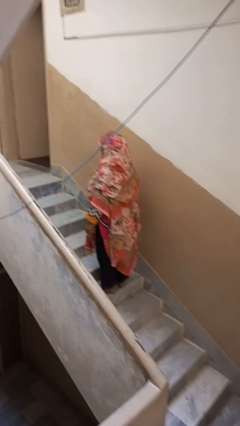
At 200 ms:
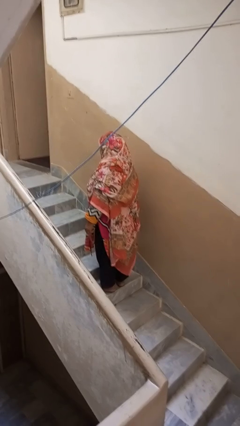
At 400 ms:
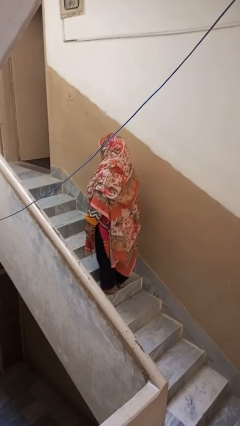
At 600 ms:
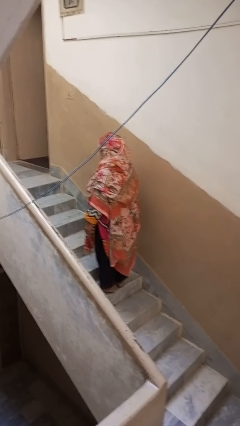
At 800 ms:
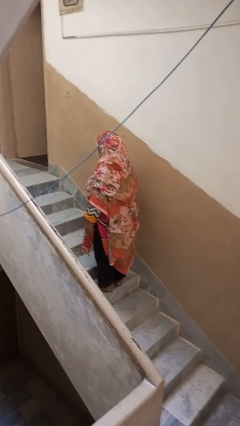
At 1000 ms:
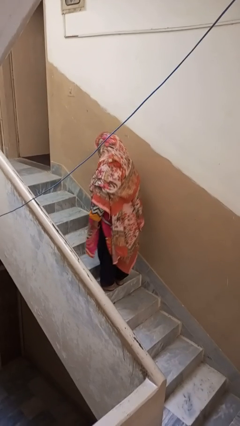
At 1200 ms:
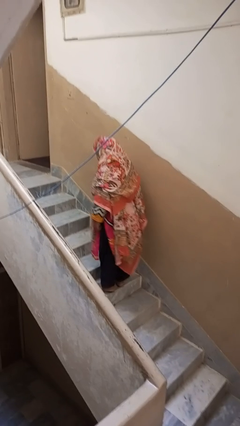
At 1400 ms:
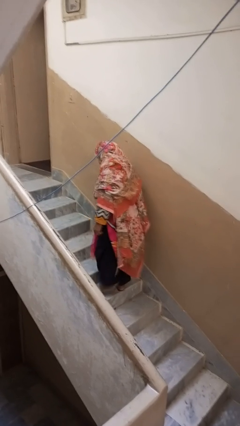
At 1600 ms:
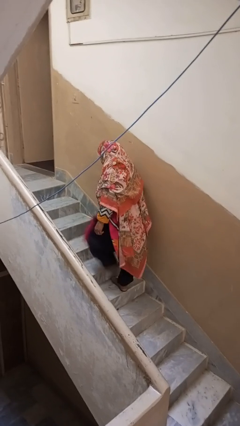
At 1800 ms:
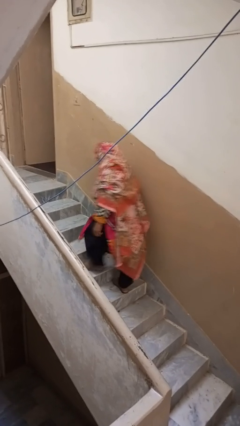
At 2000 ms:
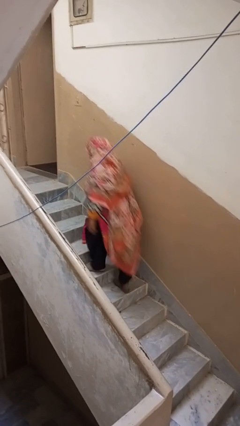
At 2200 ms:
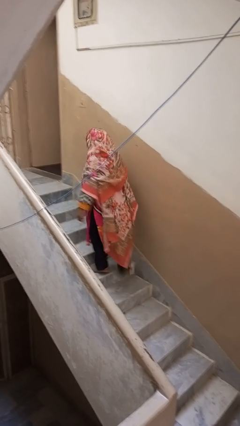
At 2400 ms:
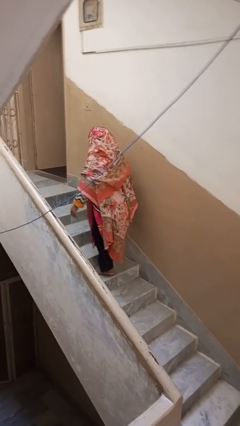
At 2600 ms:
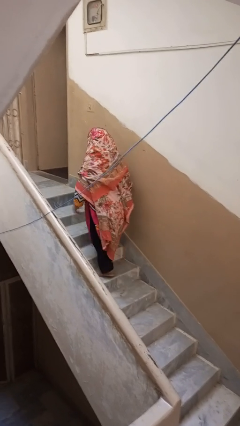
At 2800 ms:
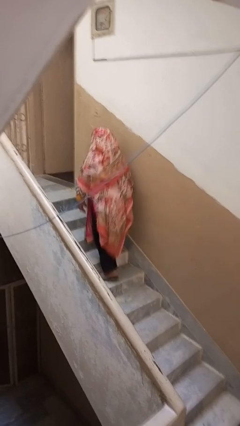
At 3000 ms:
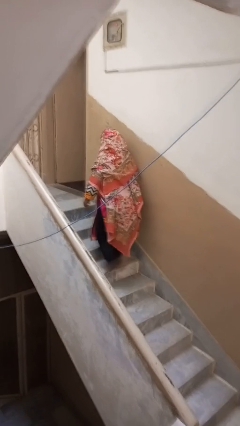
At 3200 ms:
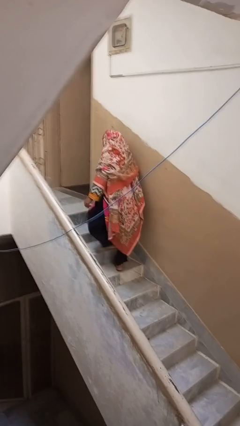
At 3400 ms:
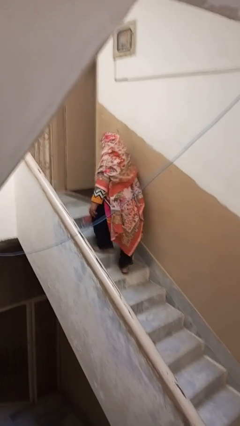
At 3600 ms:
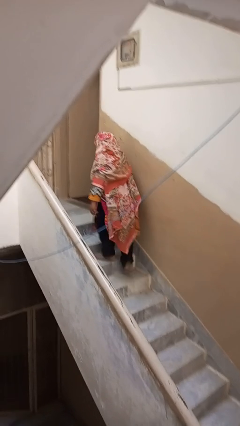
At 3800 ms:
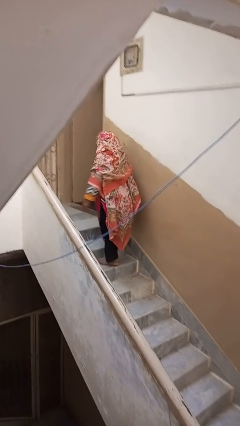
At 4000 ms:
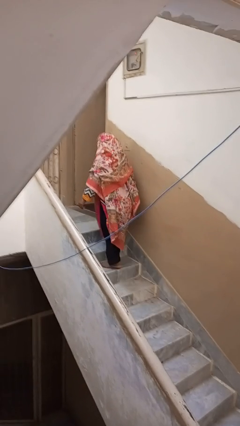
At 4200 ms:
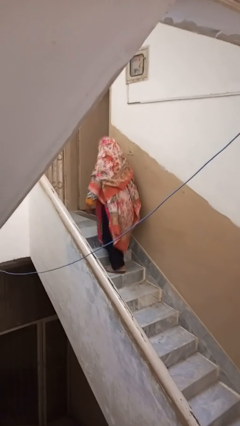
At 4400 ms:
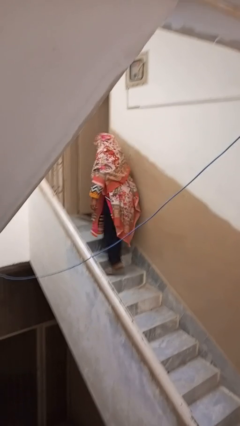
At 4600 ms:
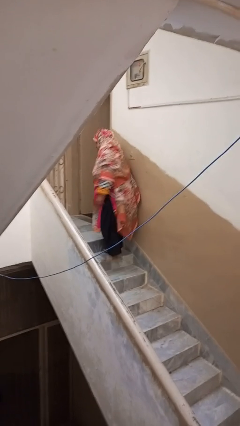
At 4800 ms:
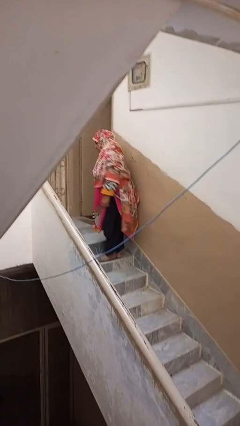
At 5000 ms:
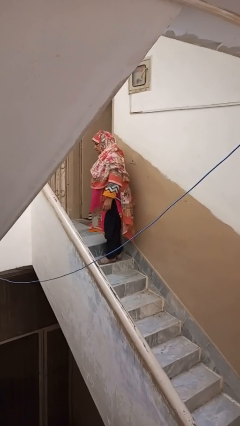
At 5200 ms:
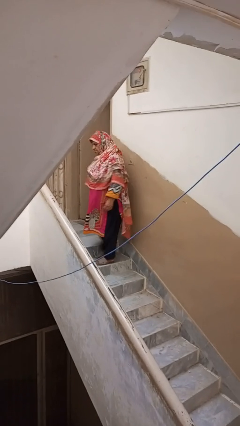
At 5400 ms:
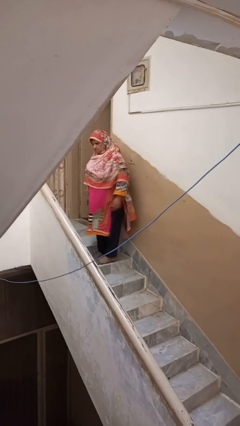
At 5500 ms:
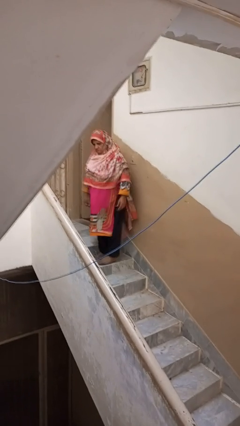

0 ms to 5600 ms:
person climbs up stairs

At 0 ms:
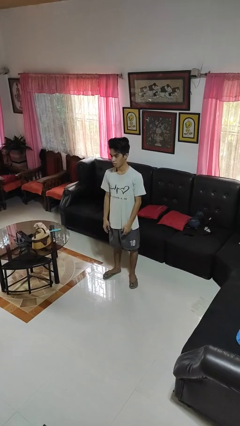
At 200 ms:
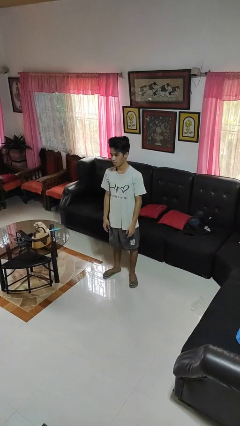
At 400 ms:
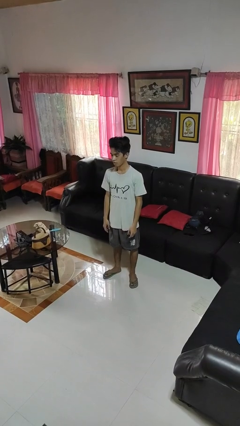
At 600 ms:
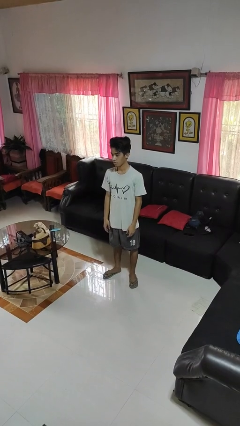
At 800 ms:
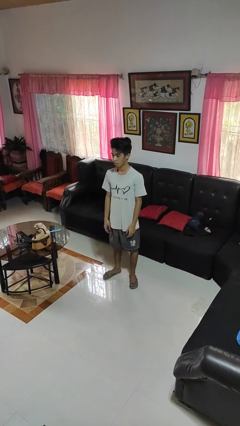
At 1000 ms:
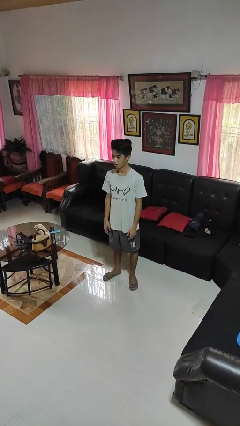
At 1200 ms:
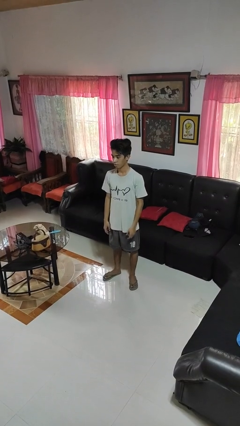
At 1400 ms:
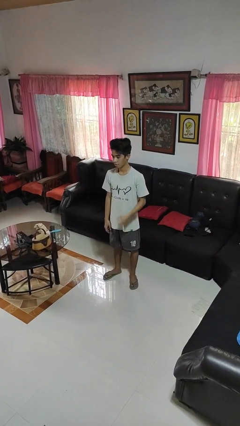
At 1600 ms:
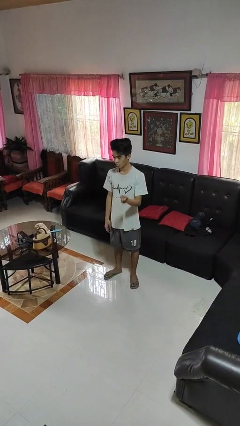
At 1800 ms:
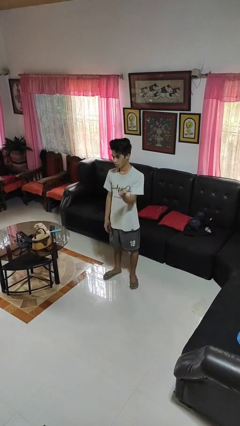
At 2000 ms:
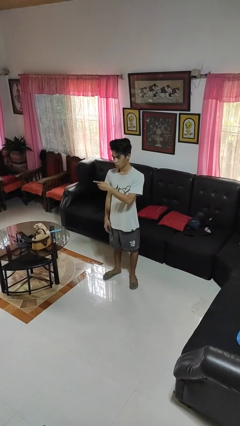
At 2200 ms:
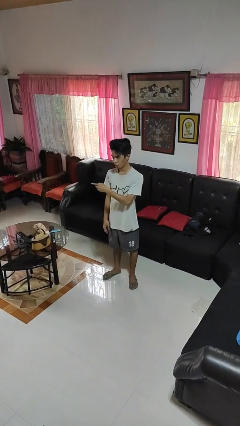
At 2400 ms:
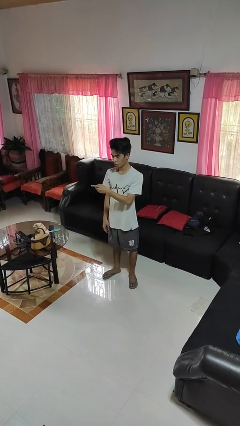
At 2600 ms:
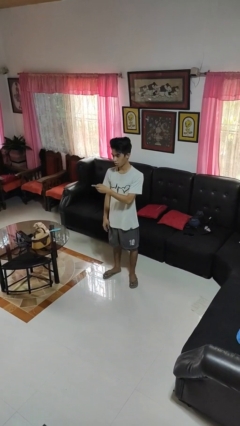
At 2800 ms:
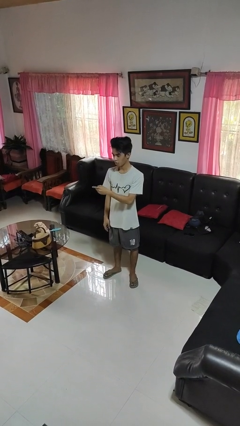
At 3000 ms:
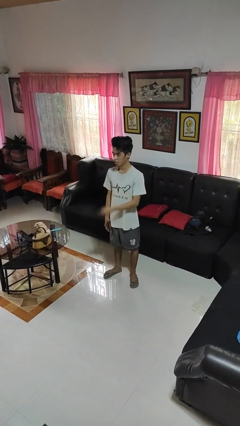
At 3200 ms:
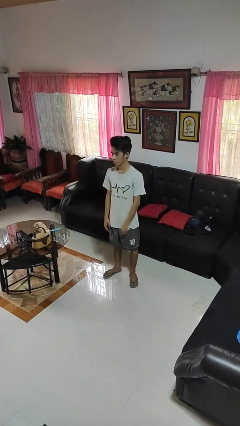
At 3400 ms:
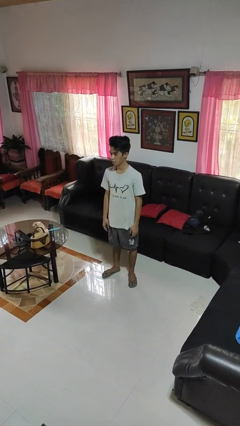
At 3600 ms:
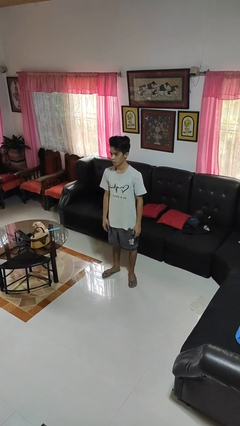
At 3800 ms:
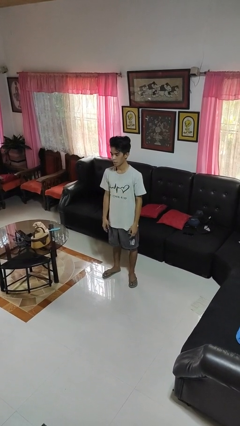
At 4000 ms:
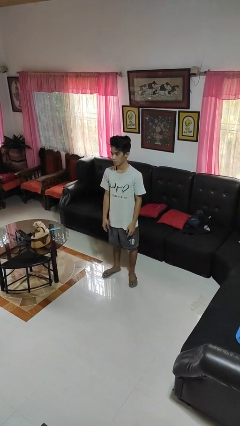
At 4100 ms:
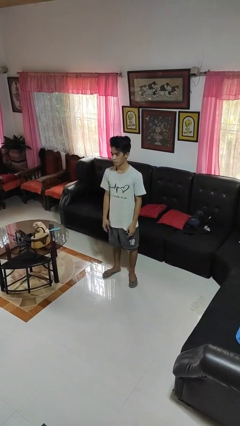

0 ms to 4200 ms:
person gestures swipe right

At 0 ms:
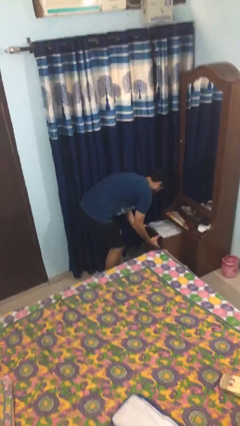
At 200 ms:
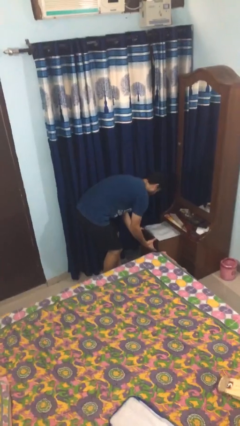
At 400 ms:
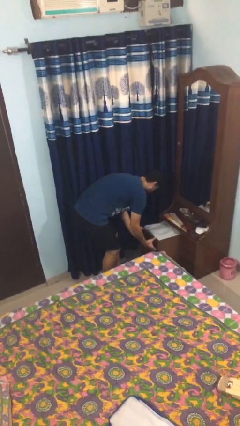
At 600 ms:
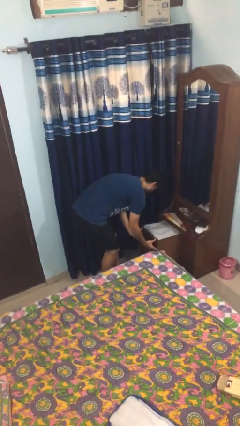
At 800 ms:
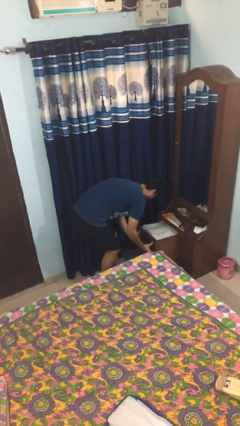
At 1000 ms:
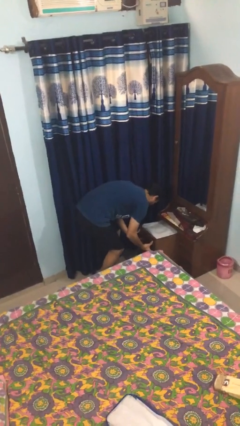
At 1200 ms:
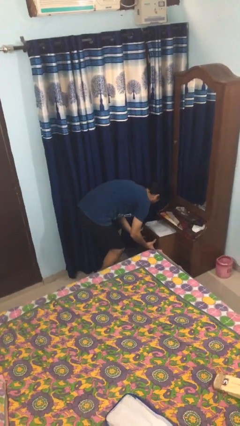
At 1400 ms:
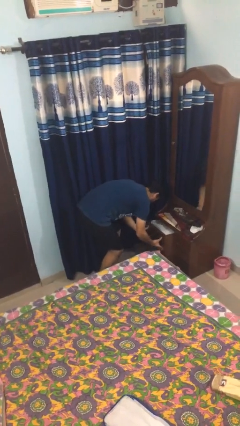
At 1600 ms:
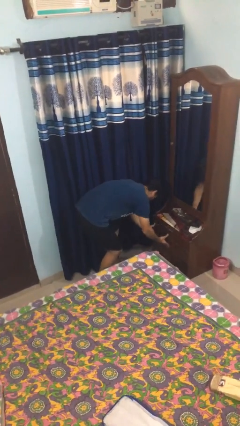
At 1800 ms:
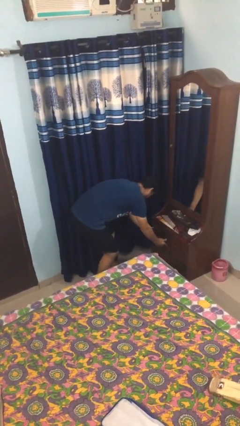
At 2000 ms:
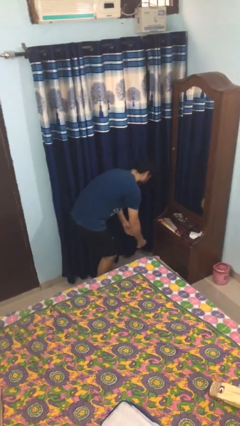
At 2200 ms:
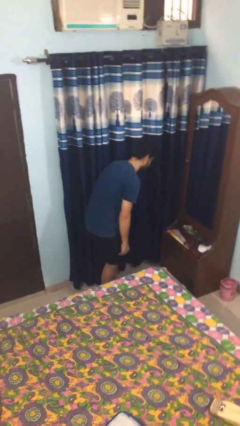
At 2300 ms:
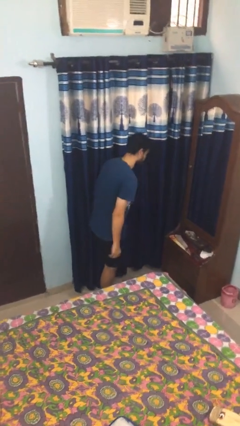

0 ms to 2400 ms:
person closes dresser drawer

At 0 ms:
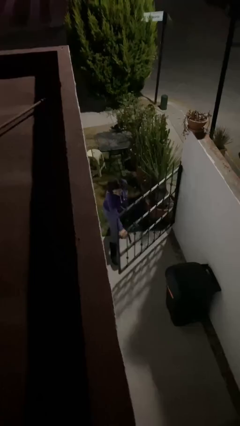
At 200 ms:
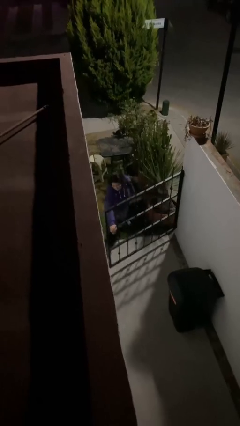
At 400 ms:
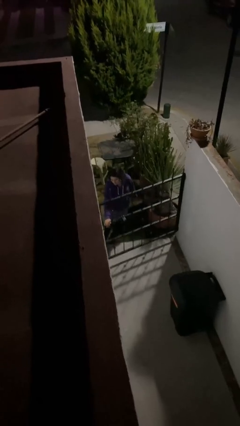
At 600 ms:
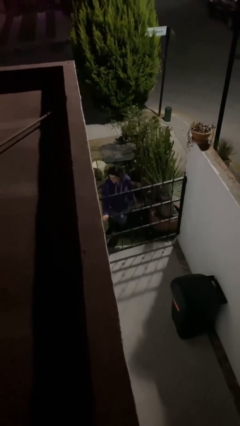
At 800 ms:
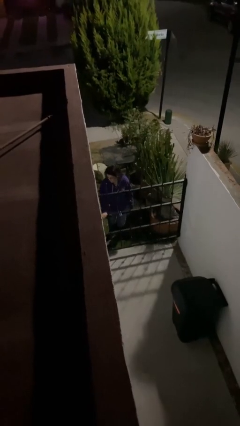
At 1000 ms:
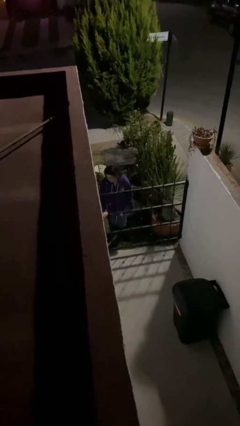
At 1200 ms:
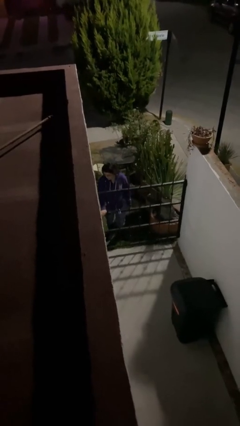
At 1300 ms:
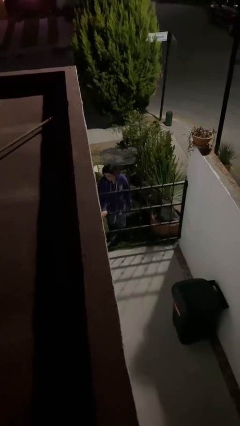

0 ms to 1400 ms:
person closes facility door

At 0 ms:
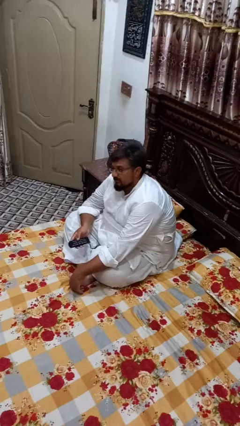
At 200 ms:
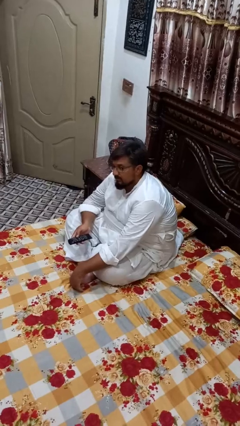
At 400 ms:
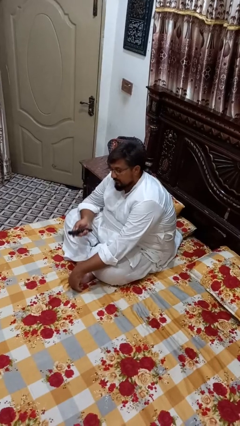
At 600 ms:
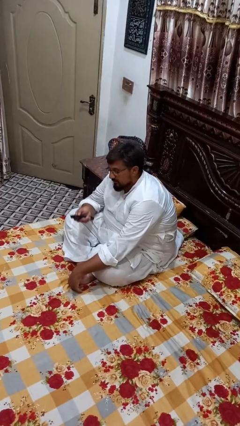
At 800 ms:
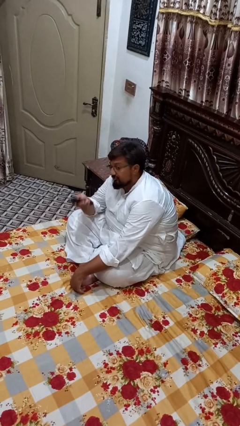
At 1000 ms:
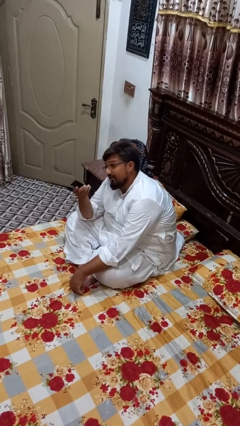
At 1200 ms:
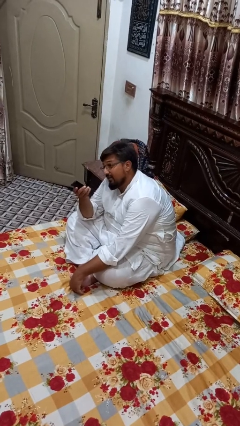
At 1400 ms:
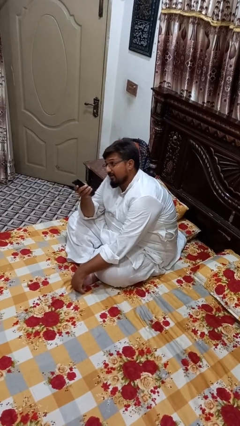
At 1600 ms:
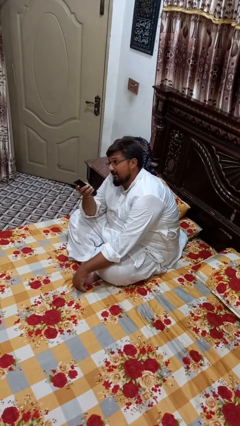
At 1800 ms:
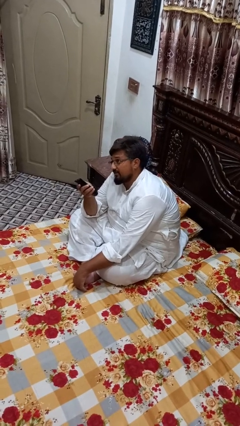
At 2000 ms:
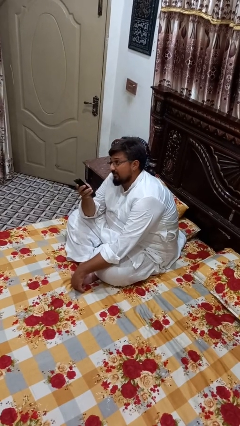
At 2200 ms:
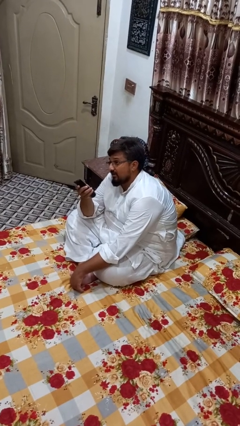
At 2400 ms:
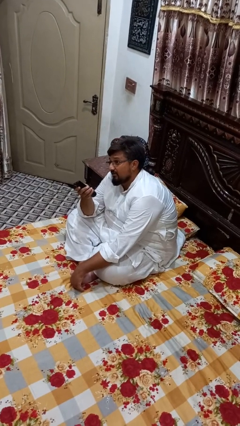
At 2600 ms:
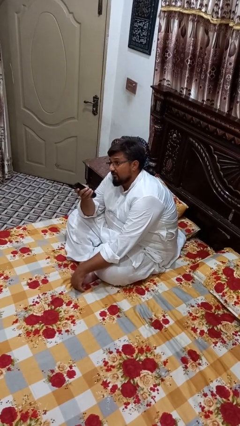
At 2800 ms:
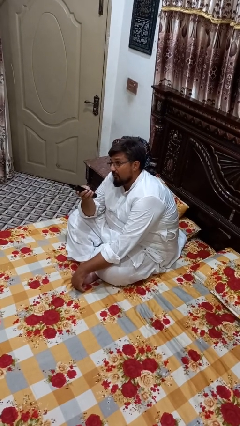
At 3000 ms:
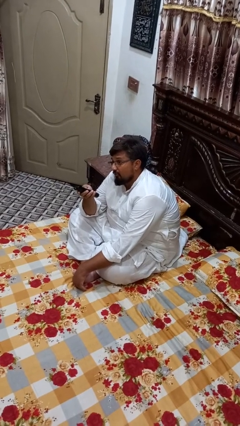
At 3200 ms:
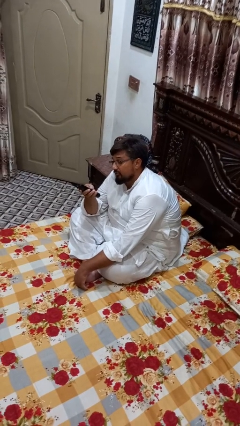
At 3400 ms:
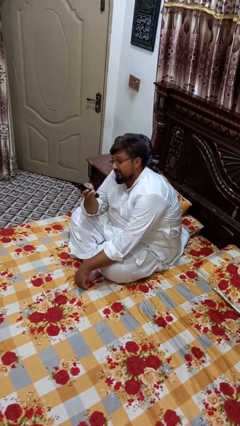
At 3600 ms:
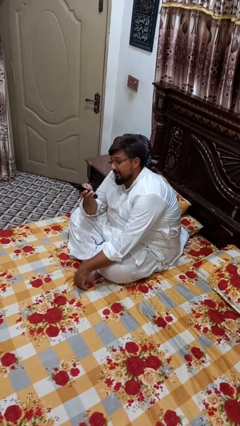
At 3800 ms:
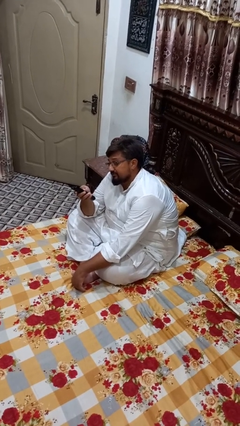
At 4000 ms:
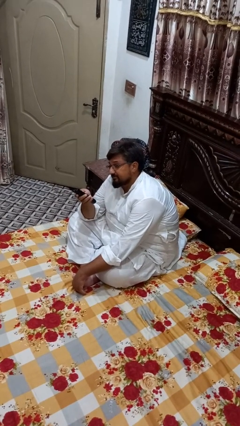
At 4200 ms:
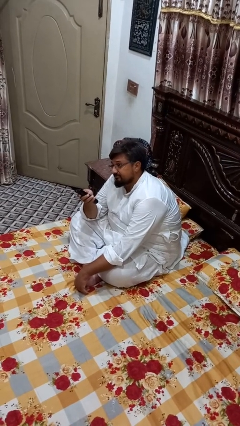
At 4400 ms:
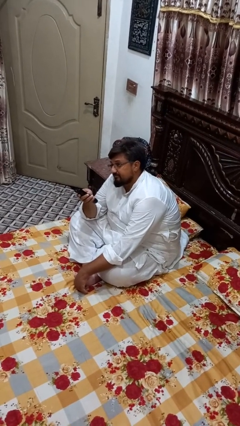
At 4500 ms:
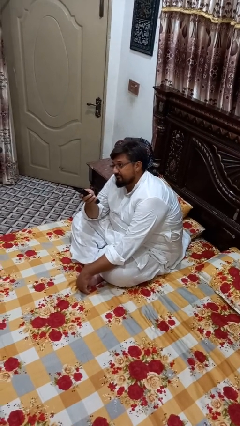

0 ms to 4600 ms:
person uses television remote
